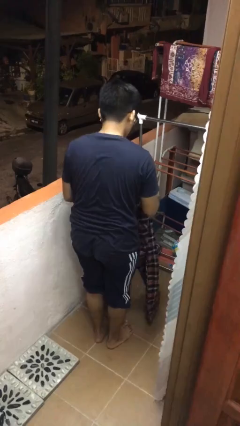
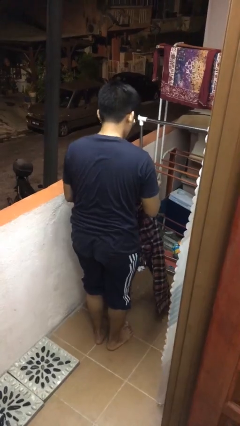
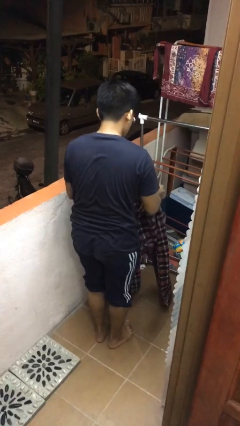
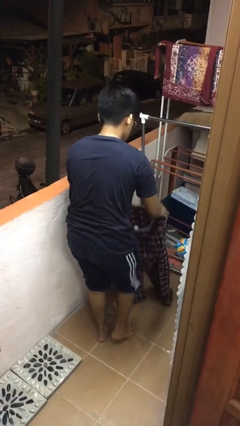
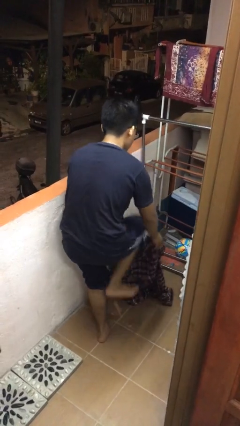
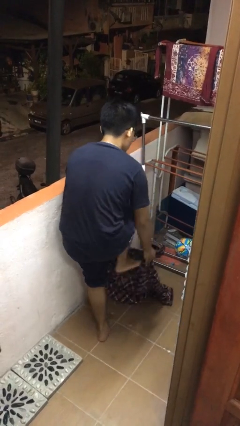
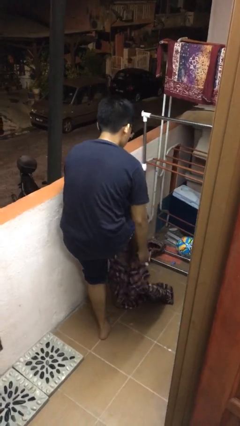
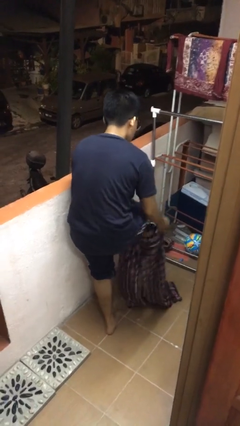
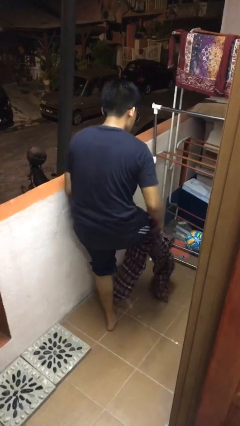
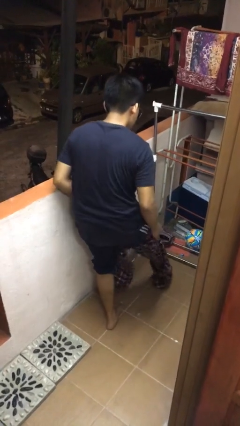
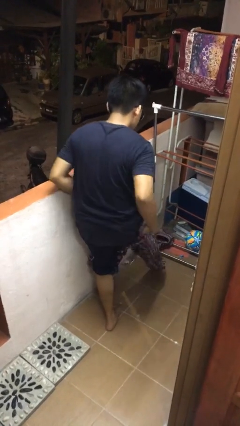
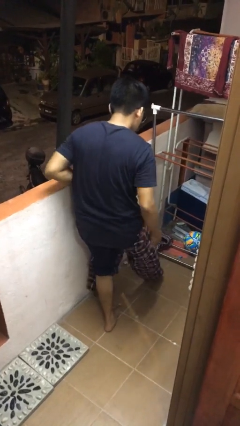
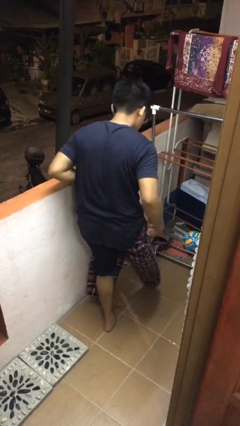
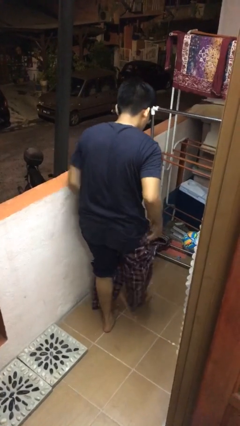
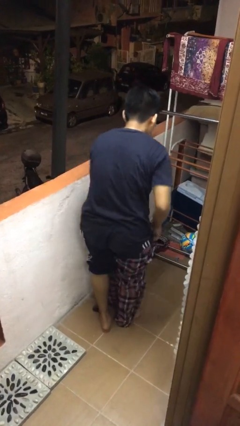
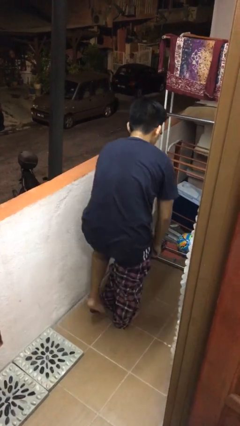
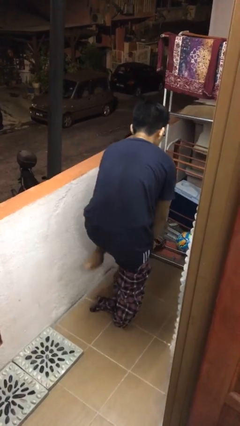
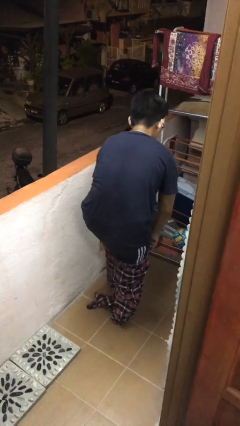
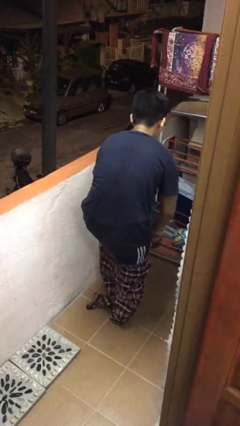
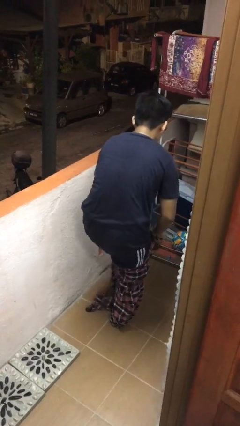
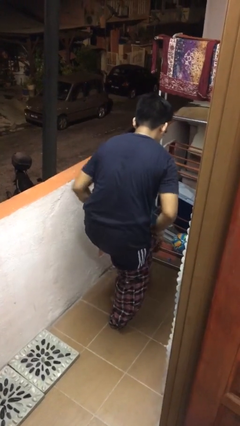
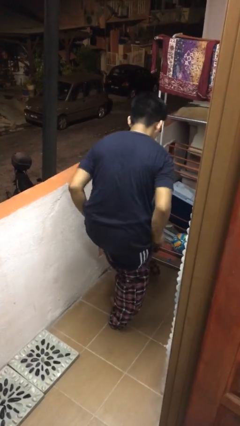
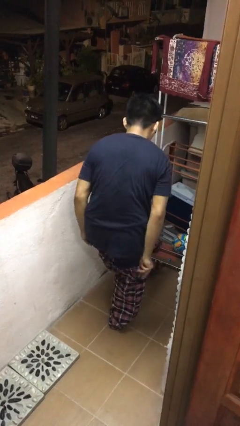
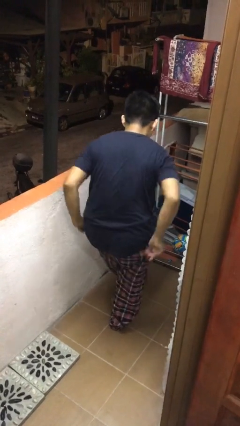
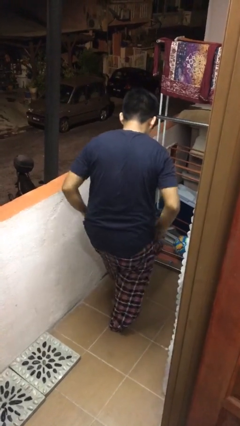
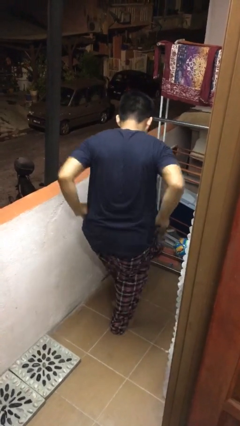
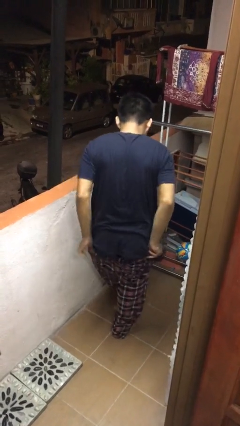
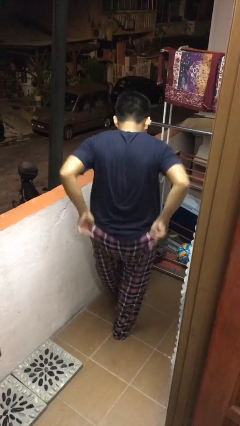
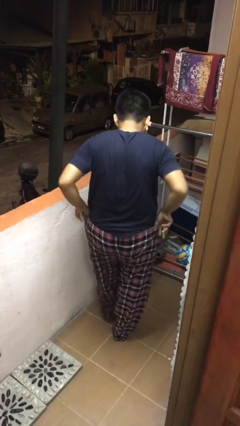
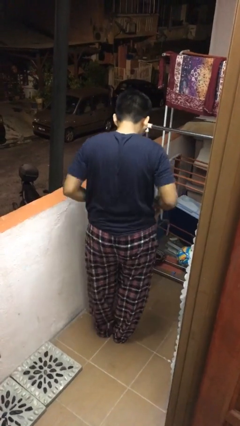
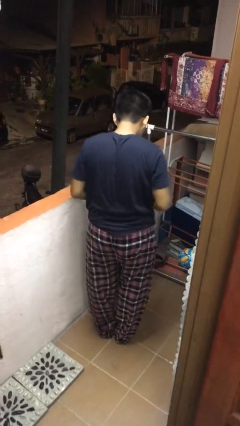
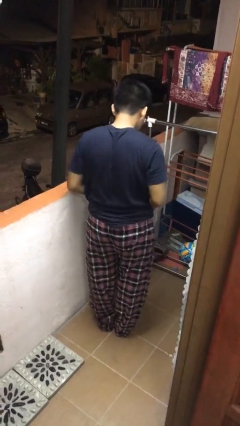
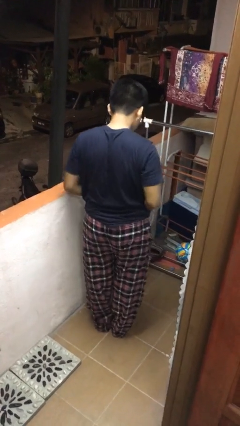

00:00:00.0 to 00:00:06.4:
person puts on pants

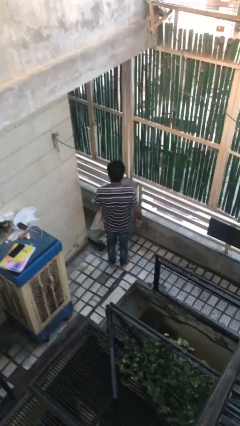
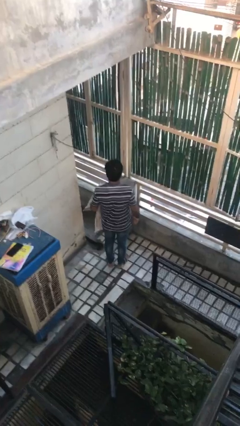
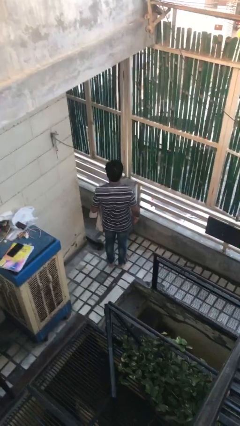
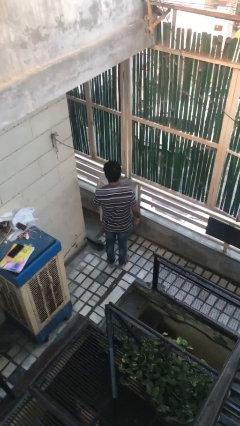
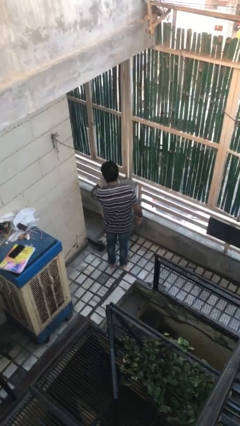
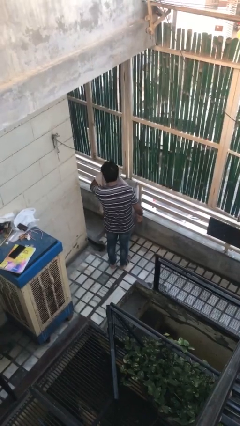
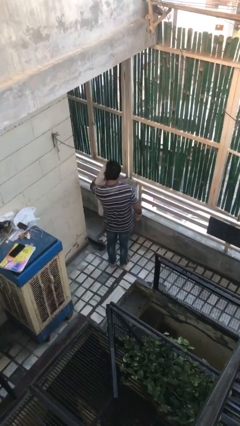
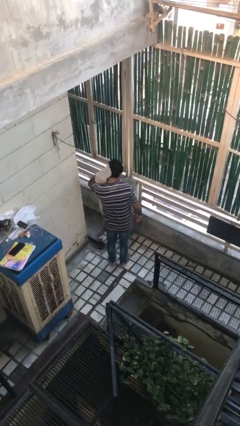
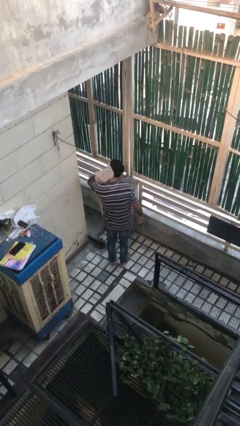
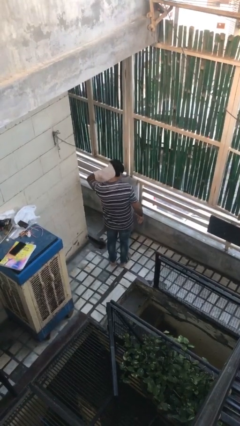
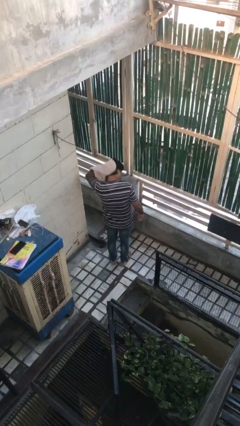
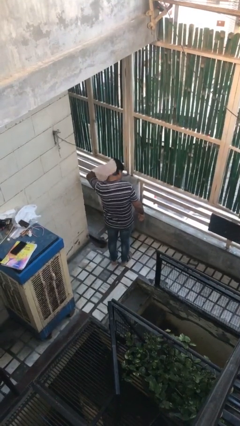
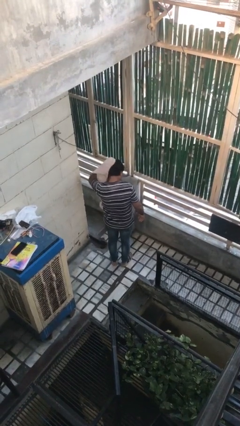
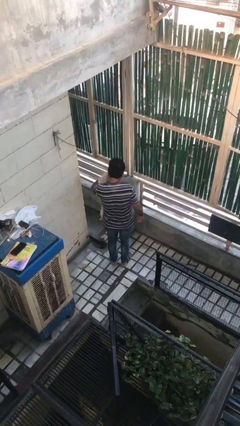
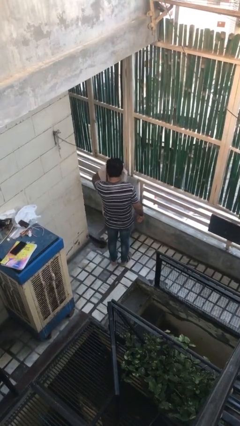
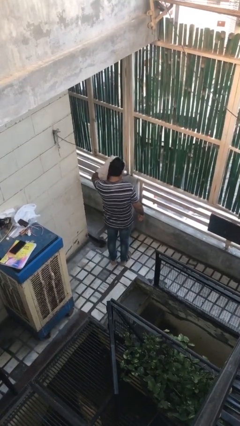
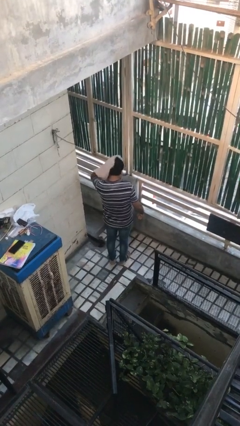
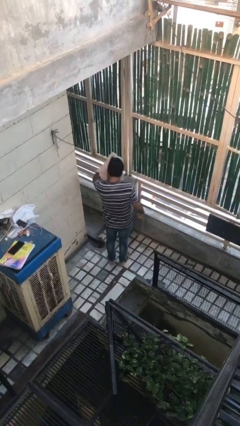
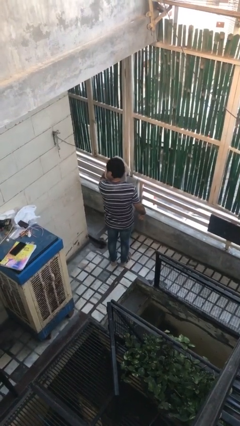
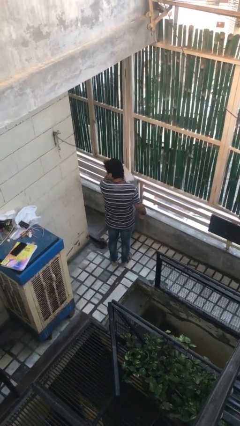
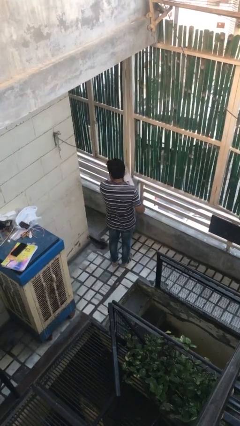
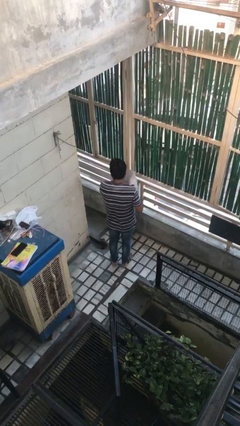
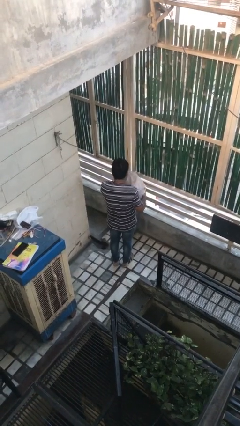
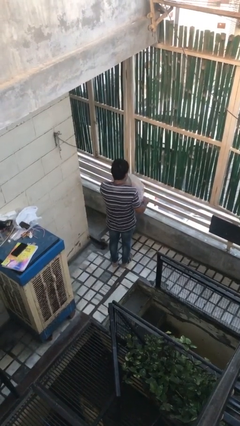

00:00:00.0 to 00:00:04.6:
person dries hair with towel

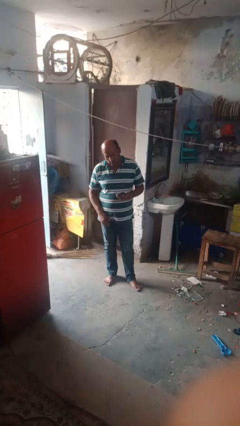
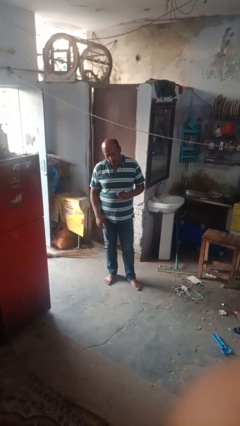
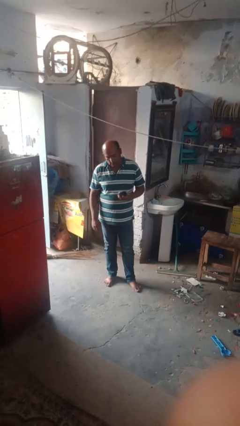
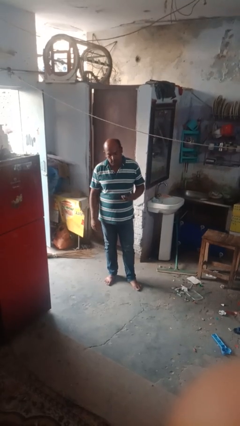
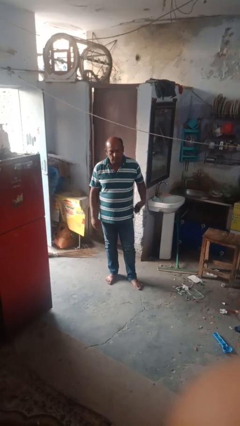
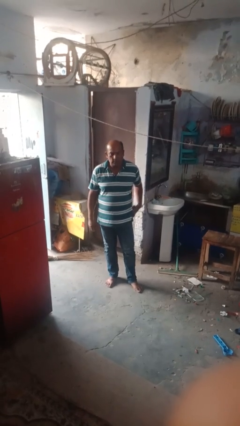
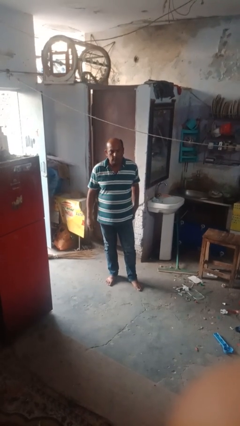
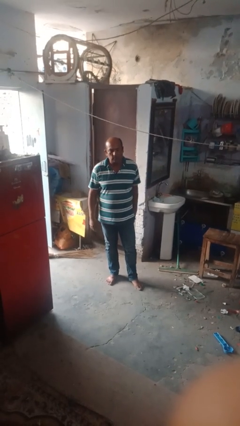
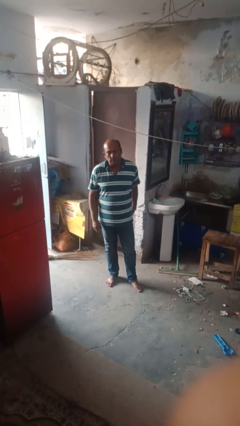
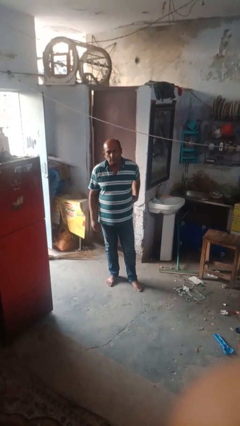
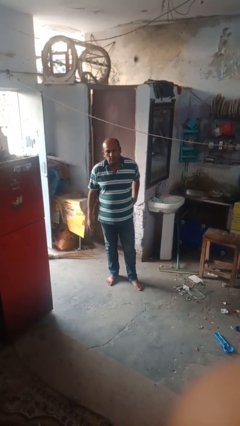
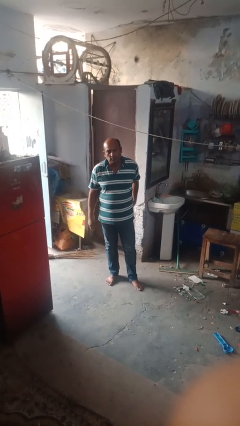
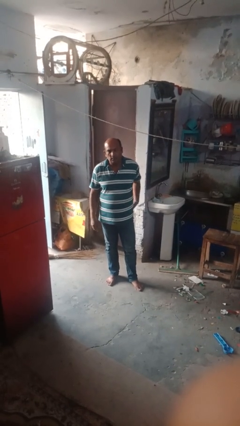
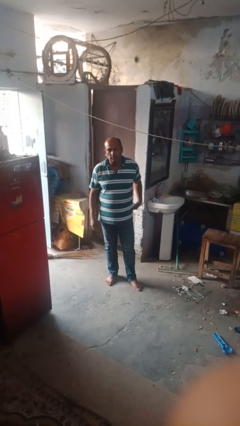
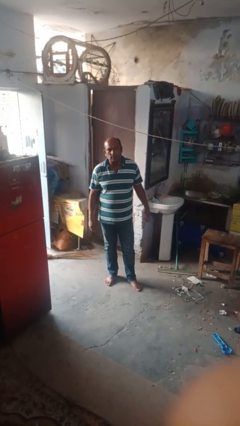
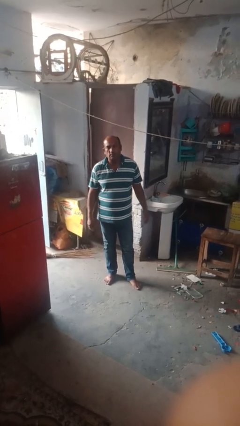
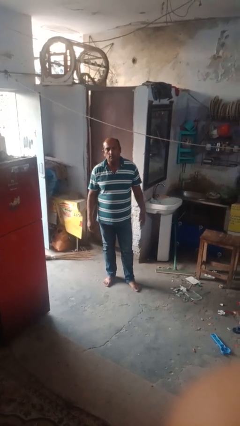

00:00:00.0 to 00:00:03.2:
person puts phone into pocket

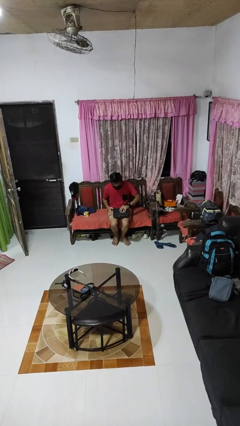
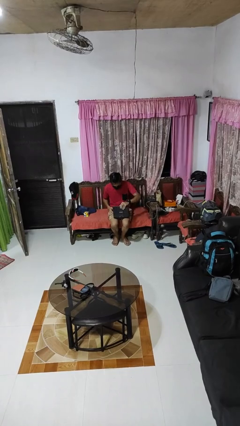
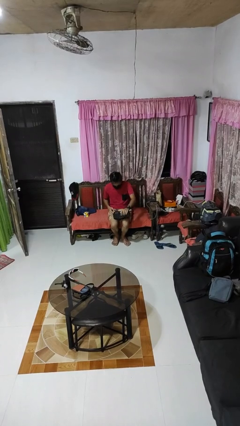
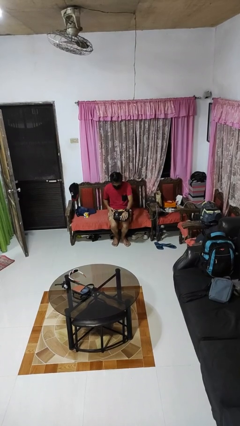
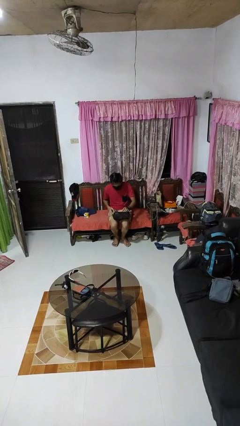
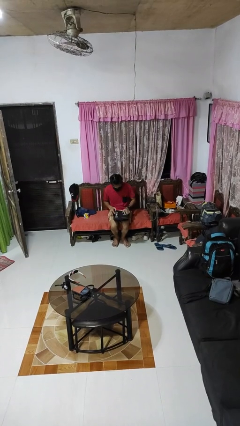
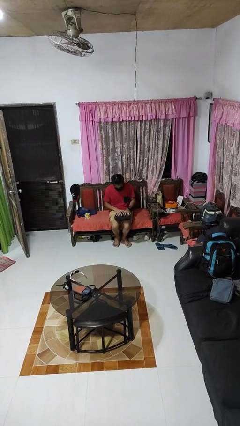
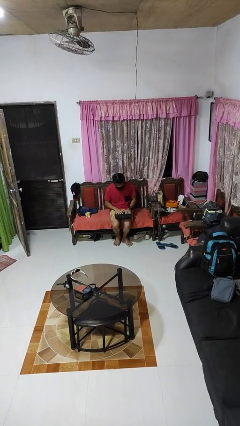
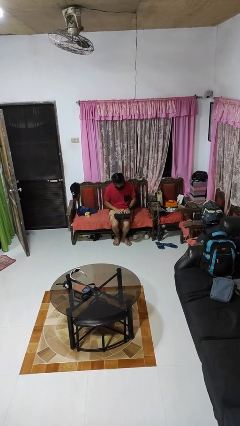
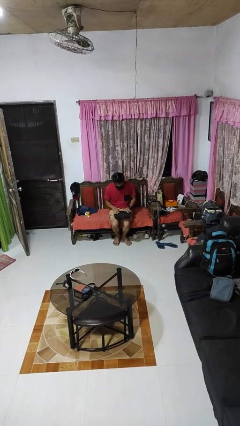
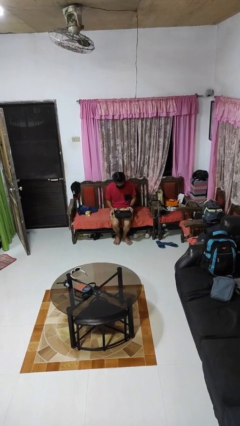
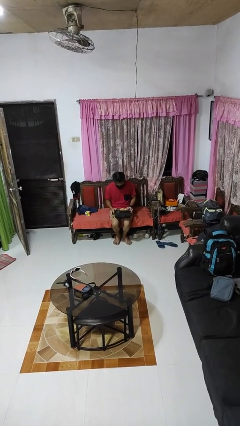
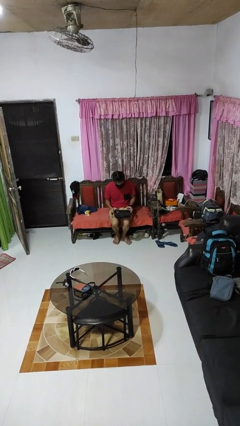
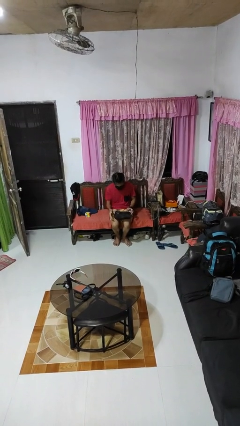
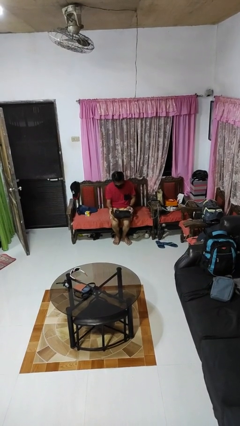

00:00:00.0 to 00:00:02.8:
person opens laptop

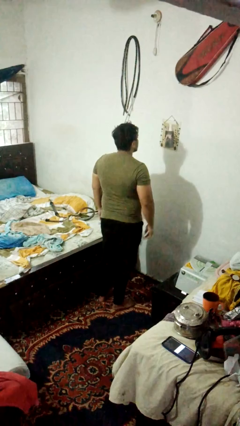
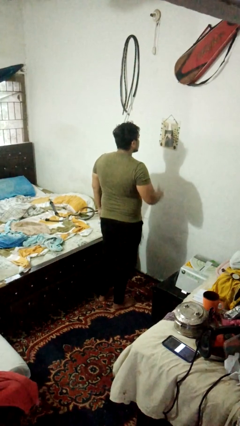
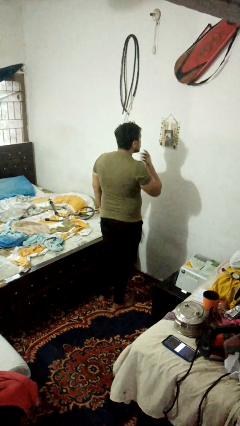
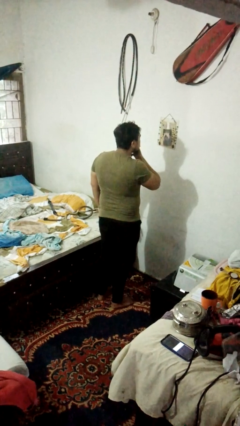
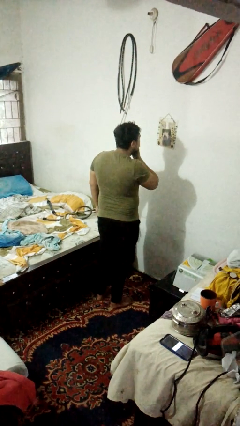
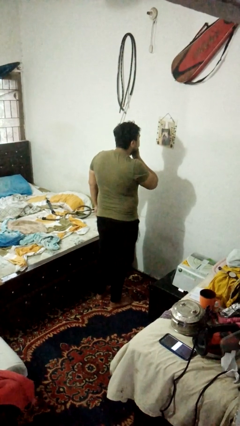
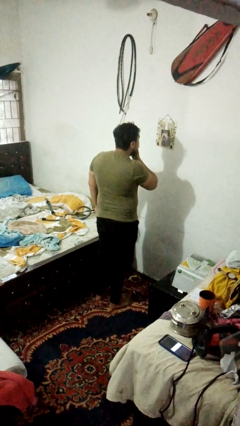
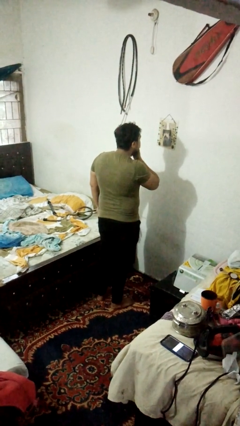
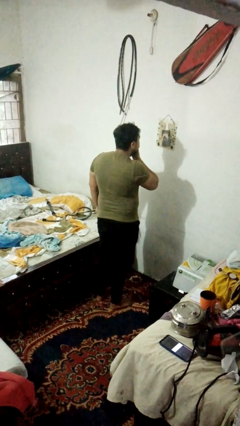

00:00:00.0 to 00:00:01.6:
person strokes chin
